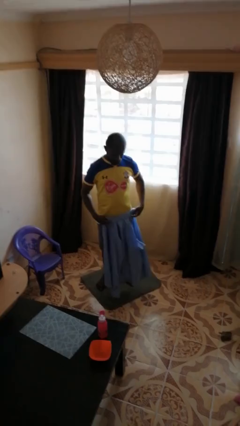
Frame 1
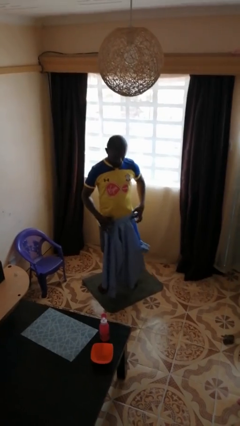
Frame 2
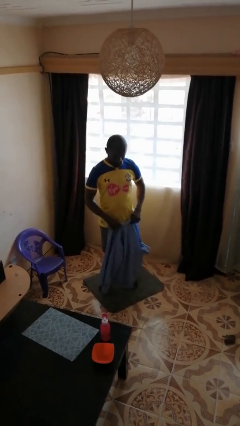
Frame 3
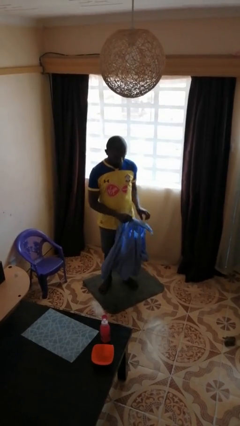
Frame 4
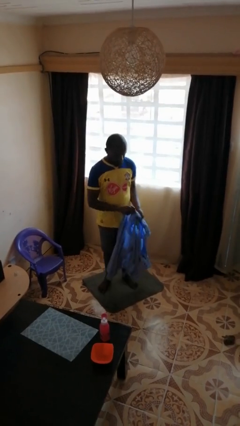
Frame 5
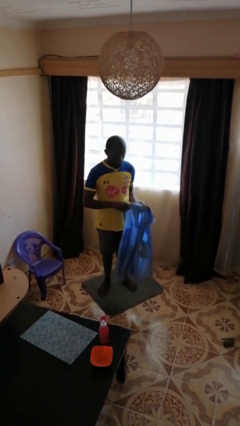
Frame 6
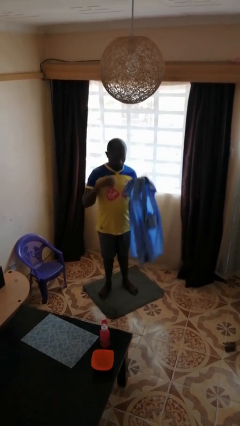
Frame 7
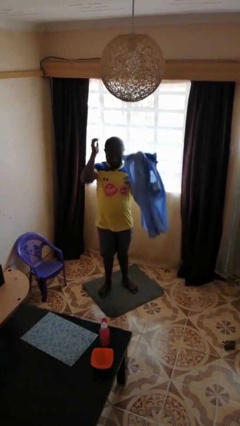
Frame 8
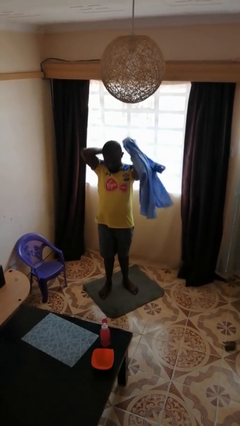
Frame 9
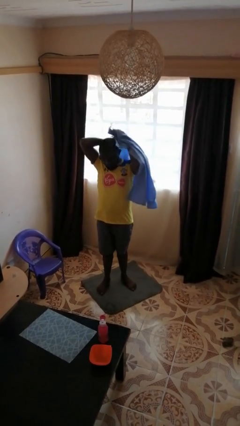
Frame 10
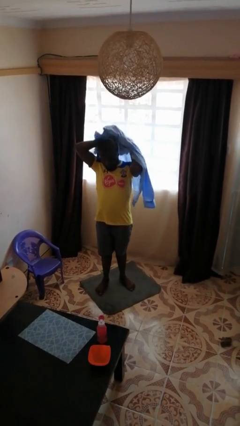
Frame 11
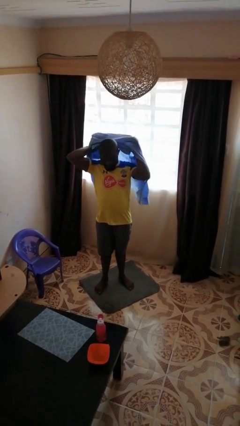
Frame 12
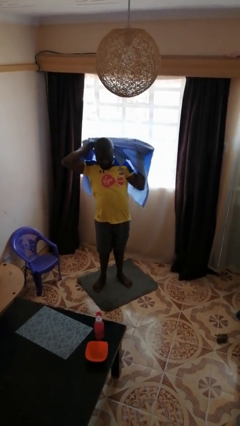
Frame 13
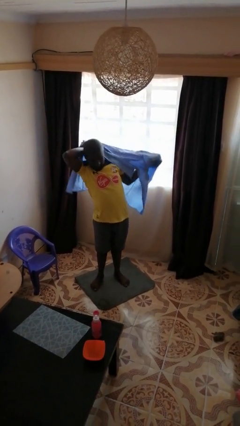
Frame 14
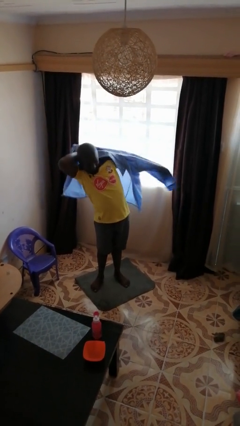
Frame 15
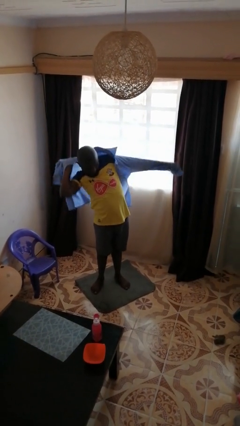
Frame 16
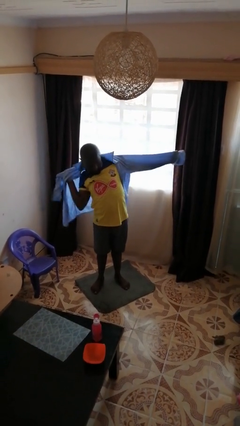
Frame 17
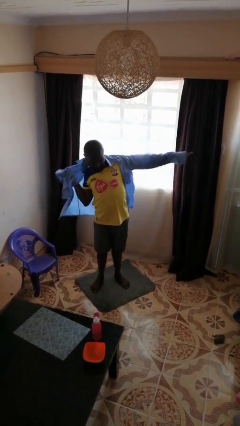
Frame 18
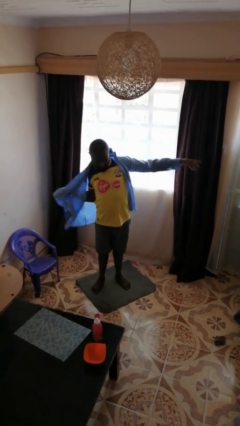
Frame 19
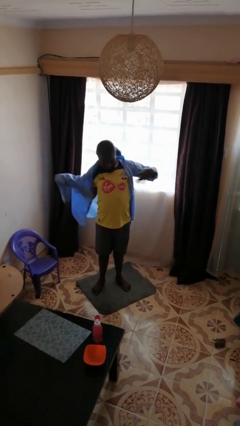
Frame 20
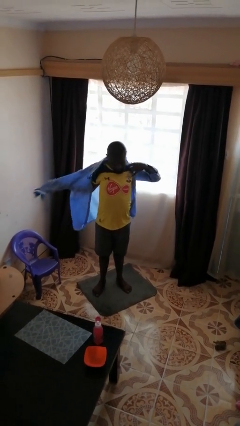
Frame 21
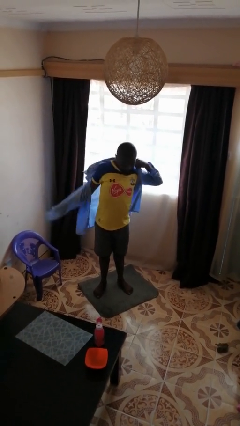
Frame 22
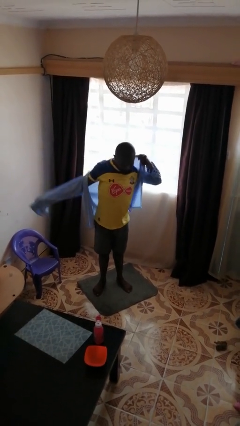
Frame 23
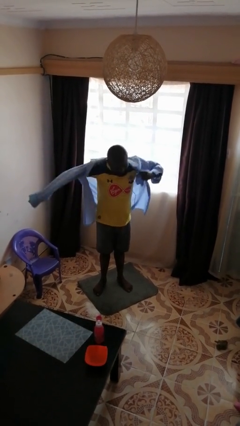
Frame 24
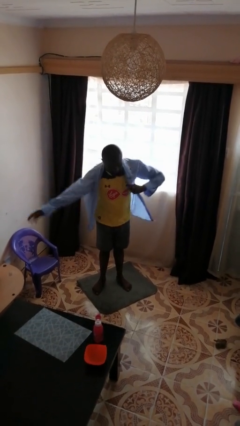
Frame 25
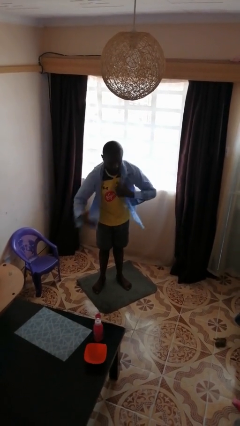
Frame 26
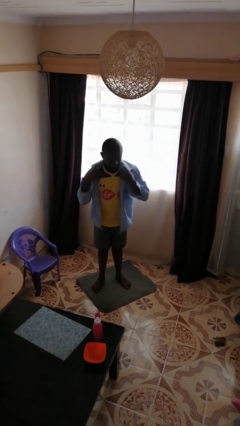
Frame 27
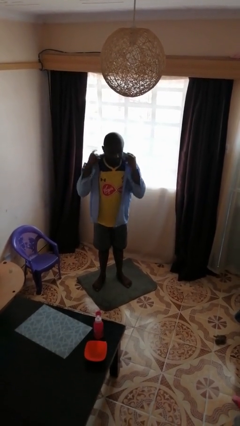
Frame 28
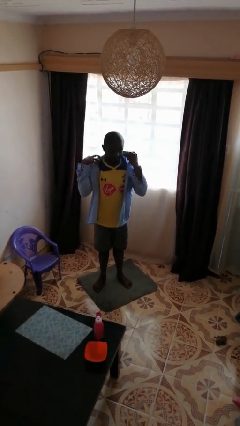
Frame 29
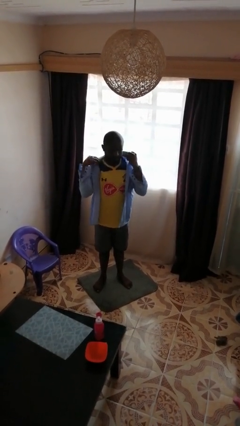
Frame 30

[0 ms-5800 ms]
person puts on shirt

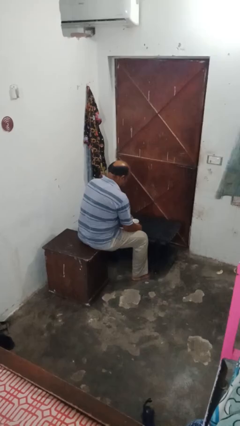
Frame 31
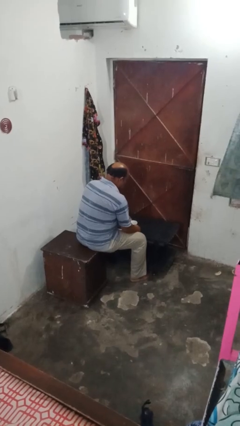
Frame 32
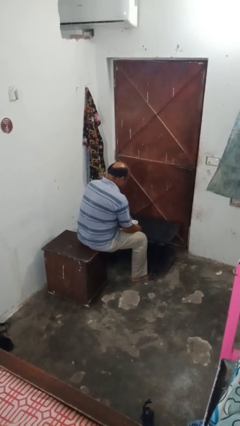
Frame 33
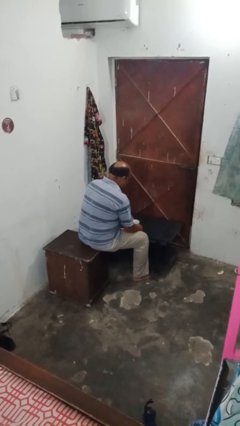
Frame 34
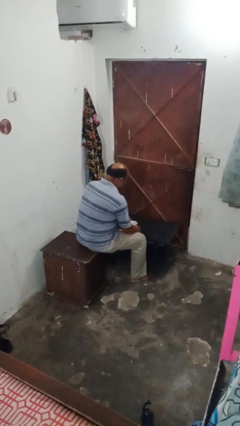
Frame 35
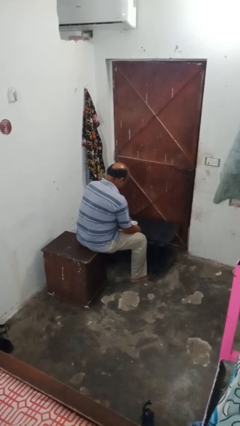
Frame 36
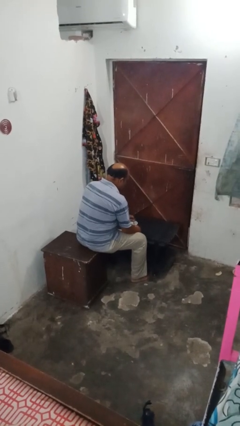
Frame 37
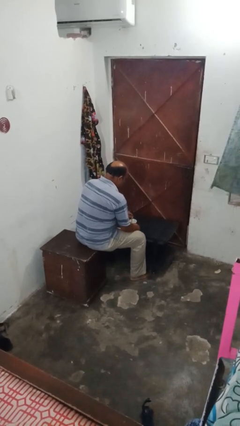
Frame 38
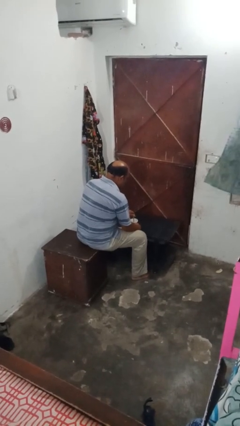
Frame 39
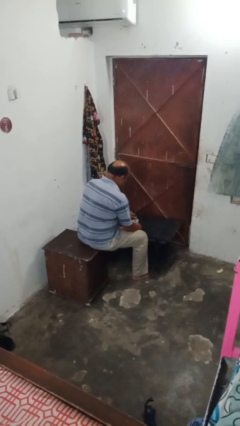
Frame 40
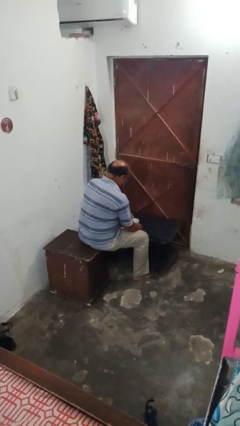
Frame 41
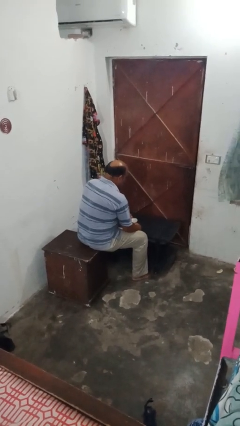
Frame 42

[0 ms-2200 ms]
person stirs mug

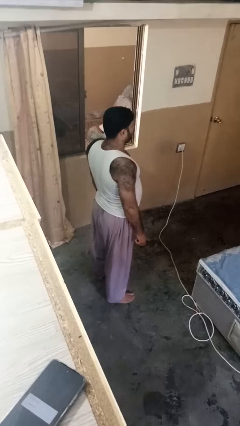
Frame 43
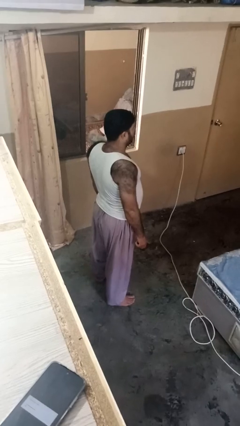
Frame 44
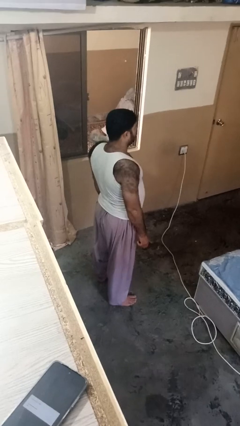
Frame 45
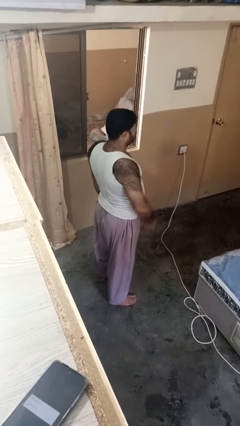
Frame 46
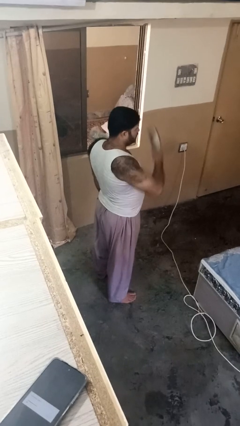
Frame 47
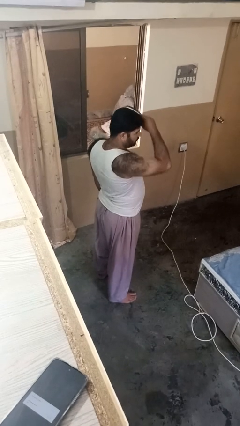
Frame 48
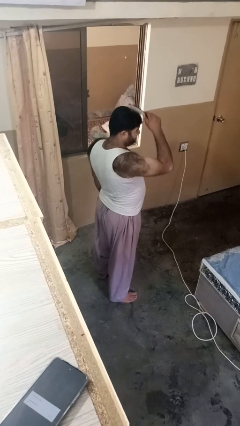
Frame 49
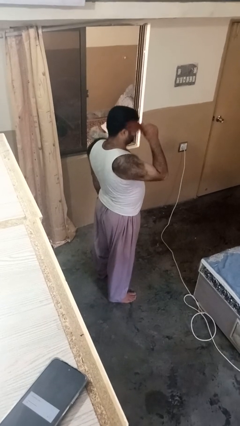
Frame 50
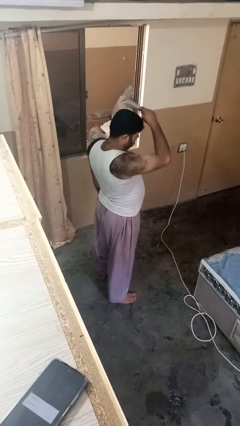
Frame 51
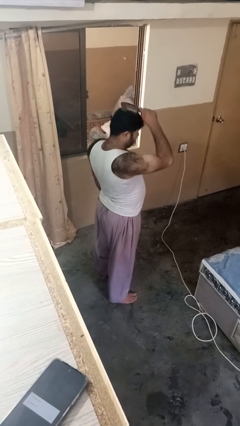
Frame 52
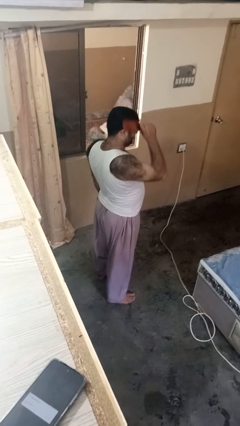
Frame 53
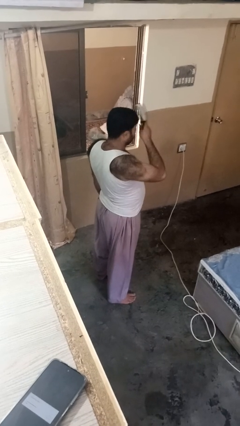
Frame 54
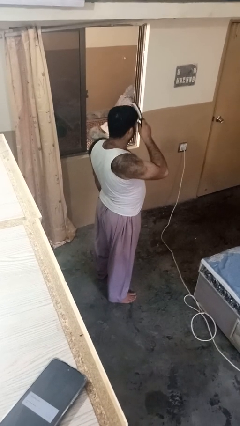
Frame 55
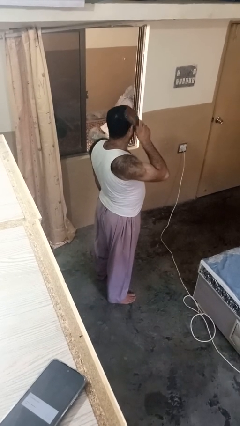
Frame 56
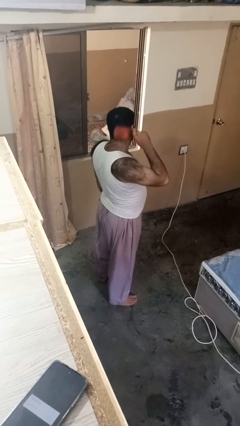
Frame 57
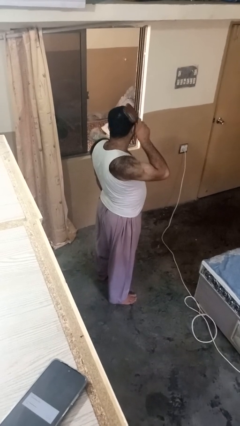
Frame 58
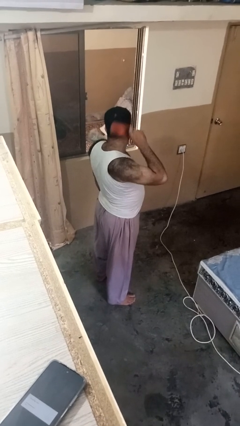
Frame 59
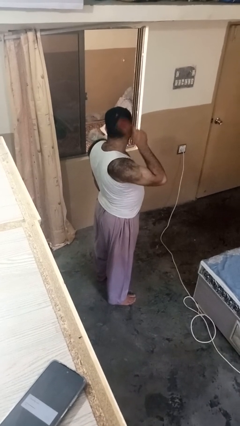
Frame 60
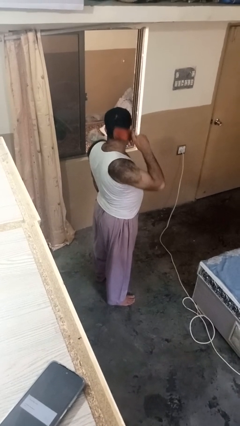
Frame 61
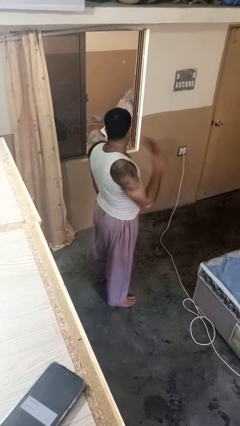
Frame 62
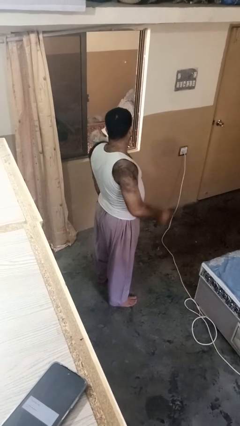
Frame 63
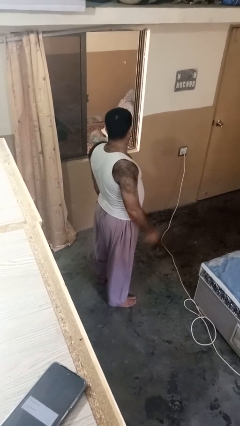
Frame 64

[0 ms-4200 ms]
person brushes hair

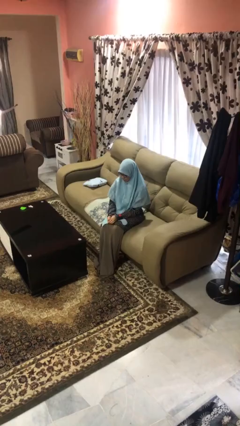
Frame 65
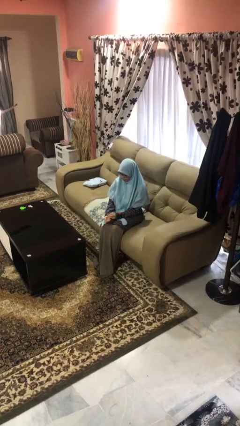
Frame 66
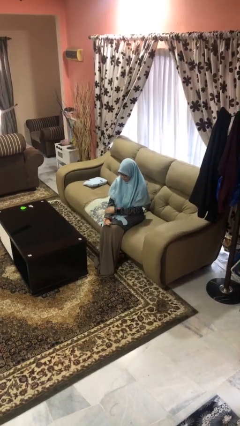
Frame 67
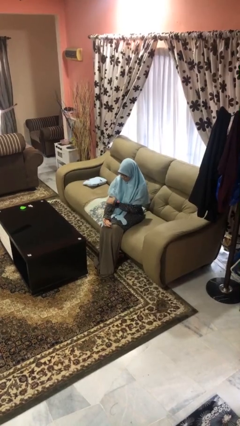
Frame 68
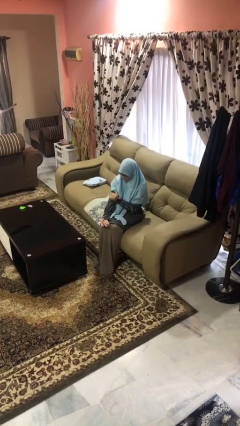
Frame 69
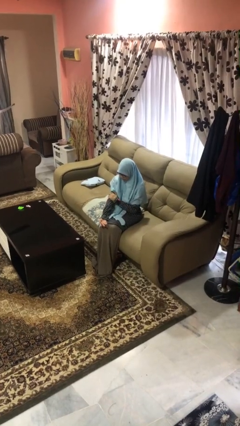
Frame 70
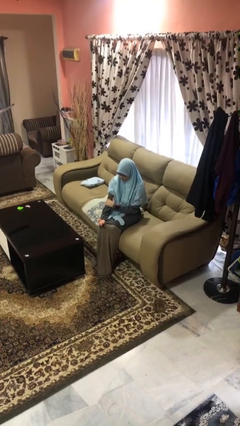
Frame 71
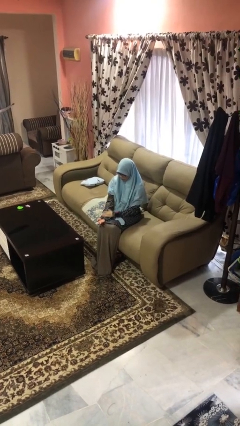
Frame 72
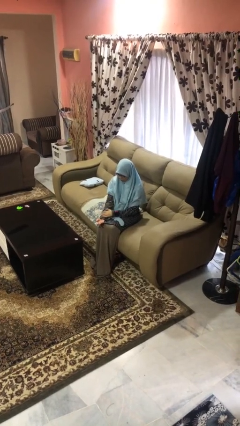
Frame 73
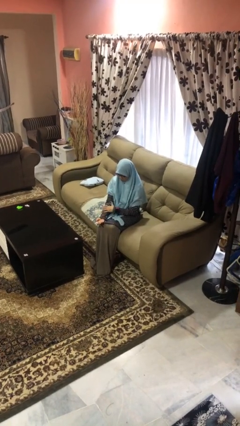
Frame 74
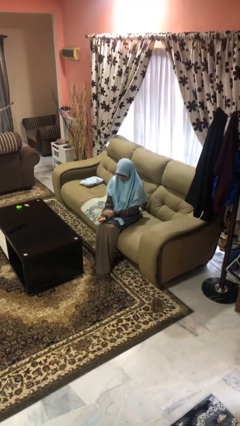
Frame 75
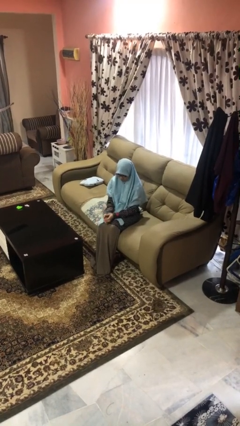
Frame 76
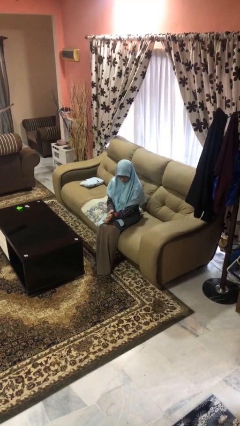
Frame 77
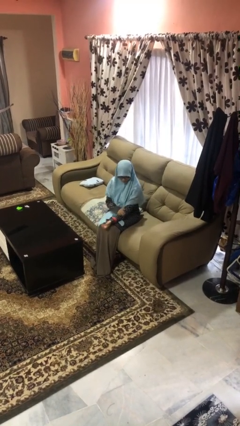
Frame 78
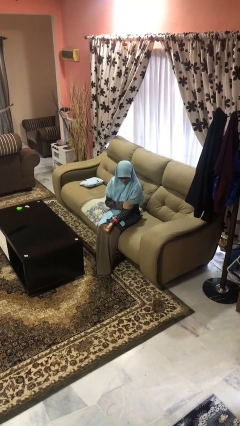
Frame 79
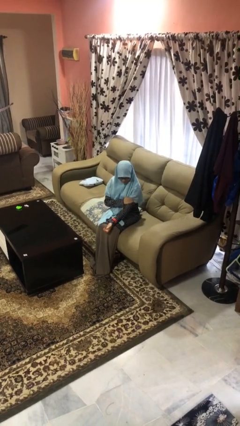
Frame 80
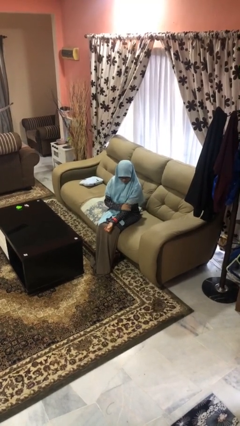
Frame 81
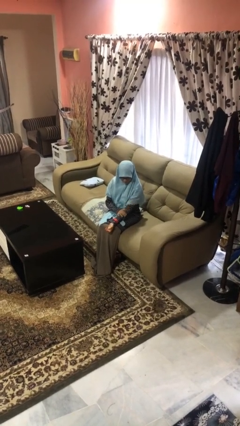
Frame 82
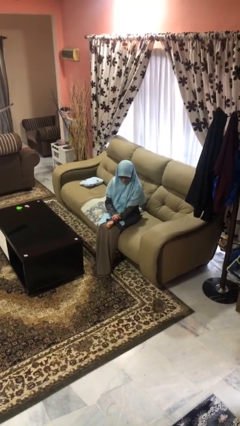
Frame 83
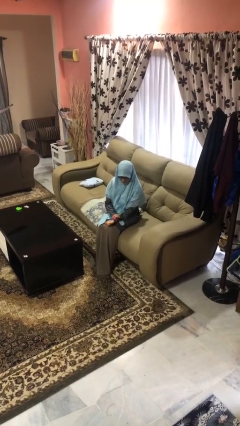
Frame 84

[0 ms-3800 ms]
person looks at hands in lap

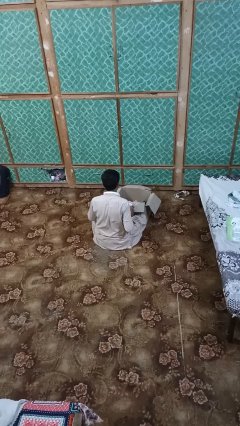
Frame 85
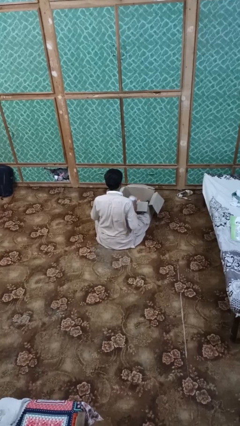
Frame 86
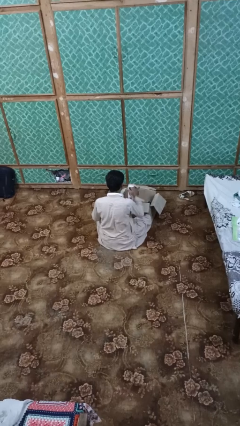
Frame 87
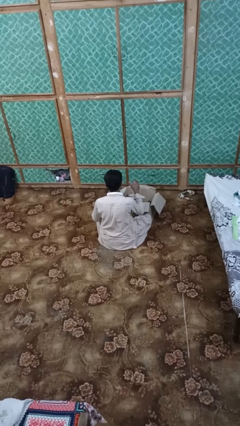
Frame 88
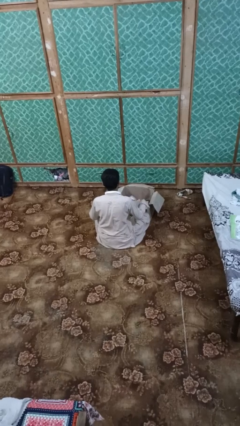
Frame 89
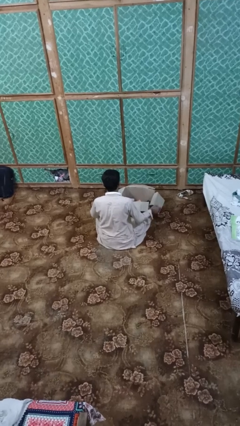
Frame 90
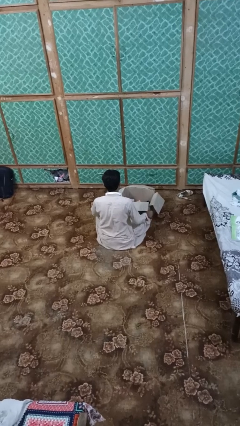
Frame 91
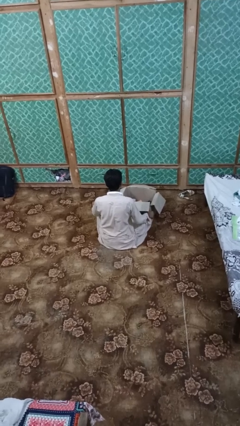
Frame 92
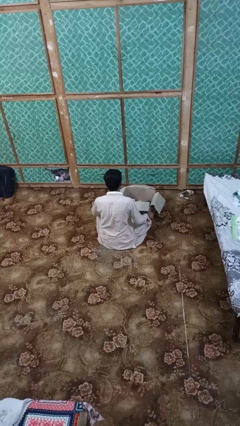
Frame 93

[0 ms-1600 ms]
person puts object into box
